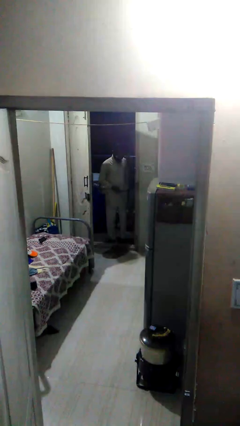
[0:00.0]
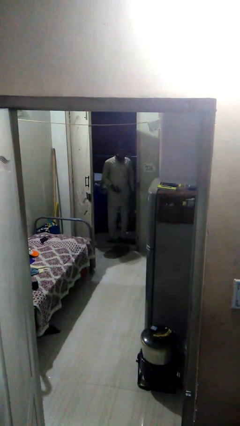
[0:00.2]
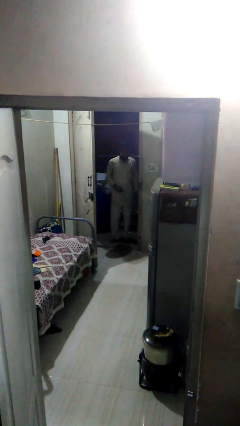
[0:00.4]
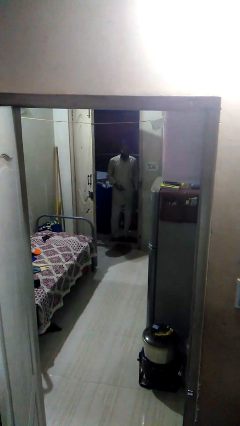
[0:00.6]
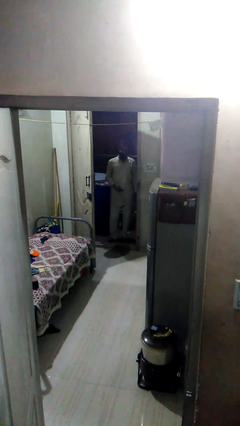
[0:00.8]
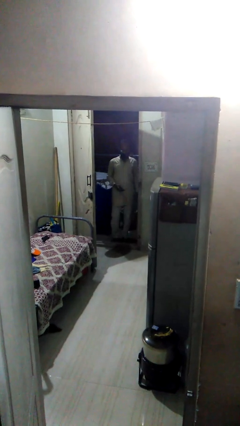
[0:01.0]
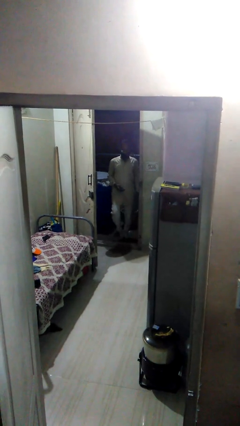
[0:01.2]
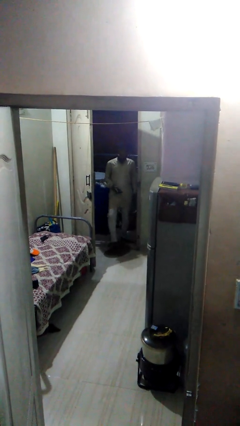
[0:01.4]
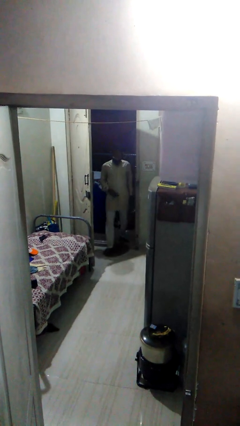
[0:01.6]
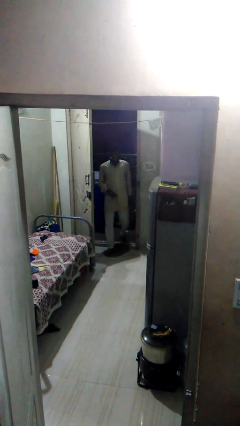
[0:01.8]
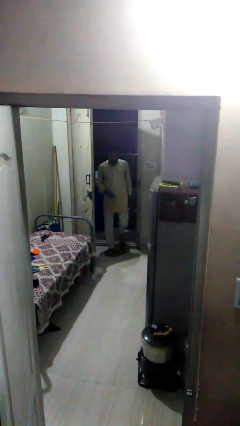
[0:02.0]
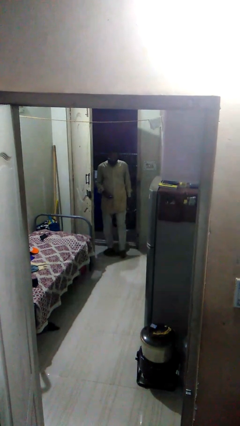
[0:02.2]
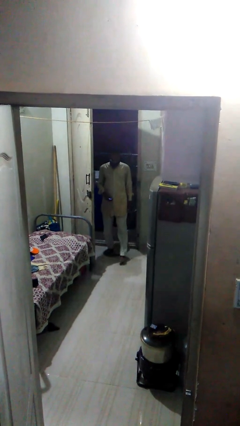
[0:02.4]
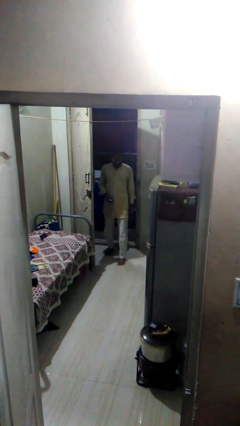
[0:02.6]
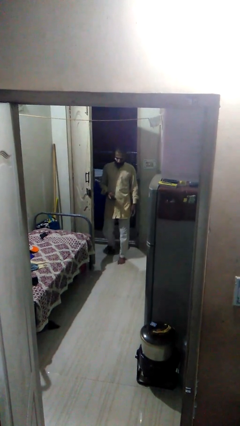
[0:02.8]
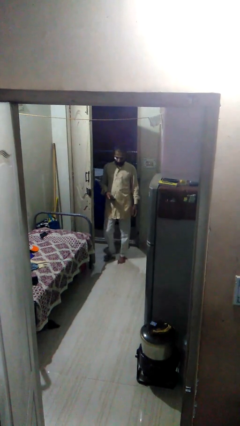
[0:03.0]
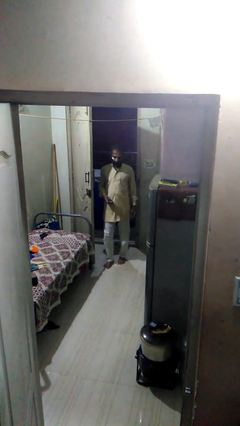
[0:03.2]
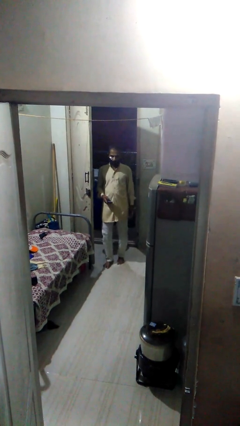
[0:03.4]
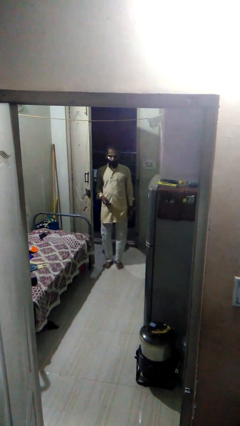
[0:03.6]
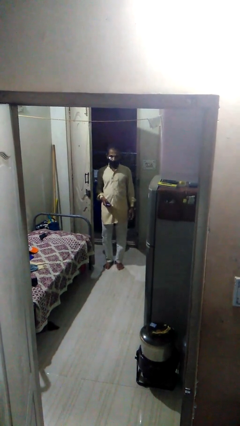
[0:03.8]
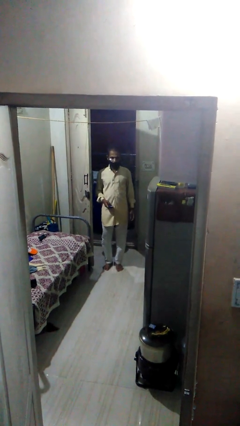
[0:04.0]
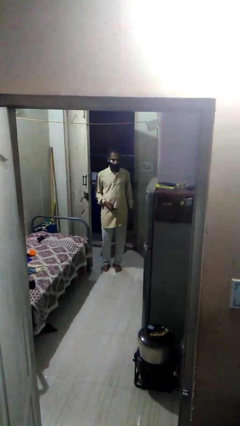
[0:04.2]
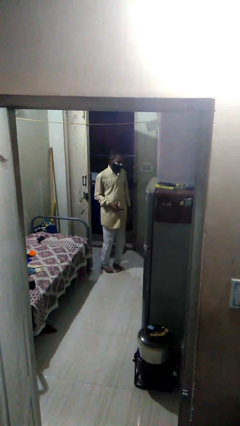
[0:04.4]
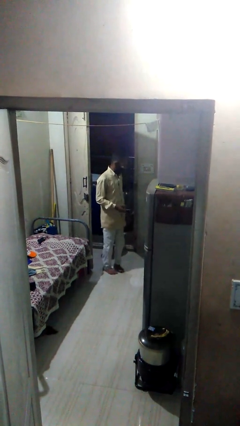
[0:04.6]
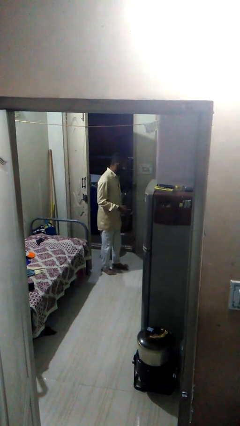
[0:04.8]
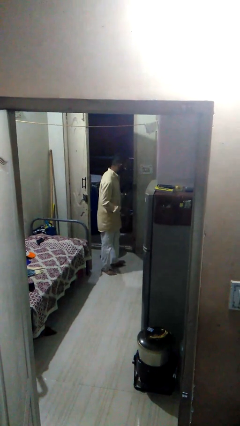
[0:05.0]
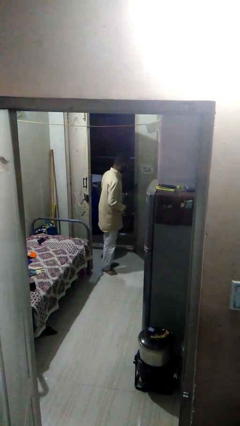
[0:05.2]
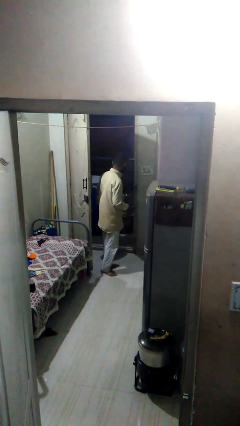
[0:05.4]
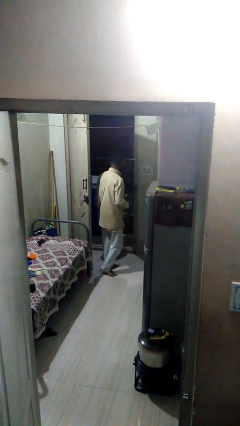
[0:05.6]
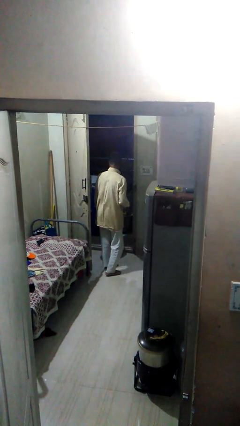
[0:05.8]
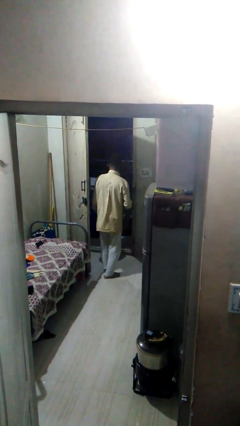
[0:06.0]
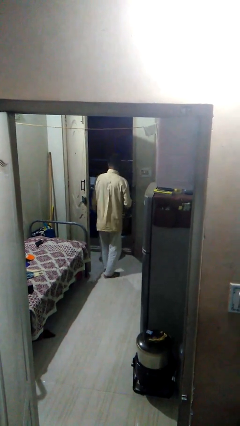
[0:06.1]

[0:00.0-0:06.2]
person enters scene through structure

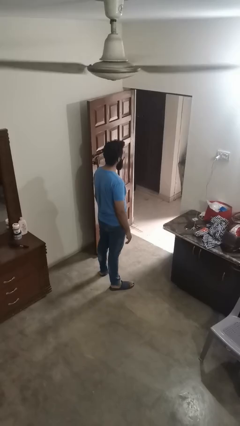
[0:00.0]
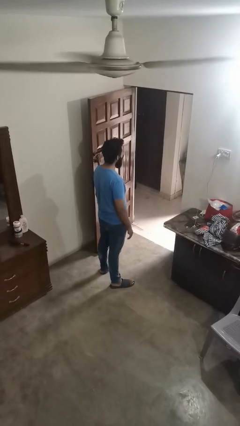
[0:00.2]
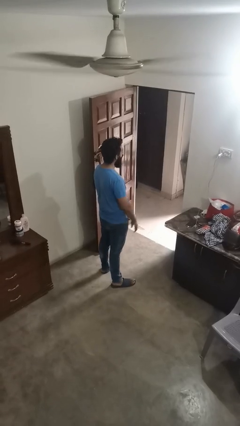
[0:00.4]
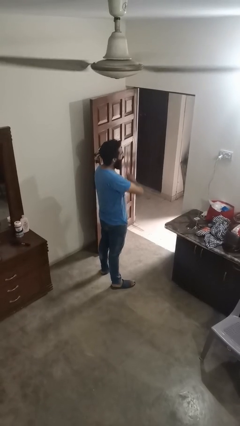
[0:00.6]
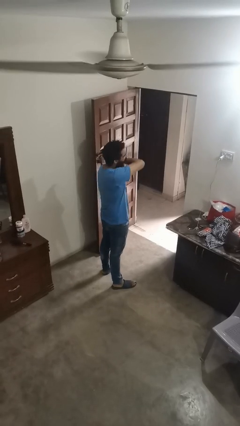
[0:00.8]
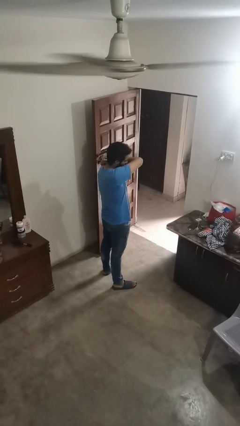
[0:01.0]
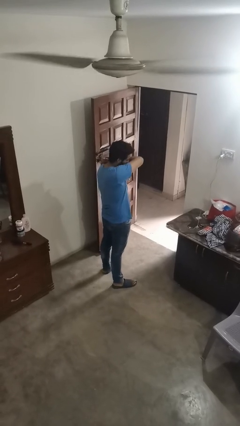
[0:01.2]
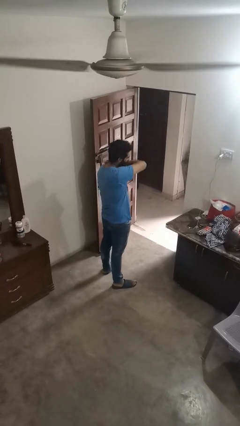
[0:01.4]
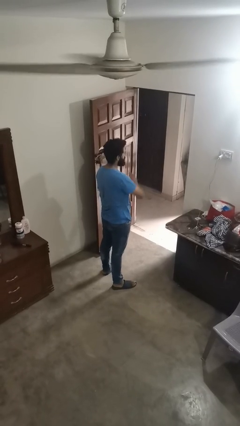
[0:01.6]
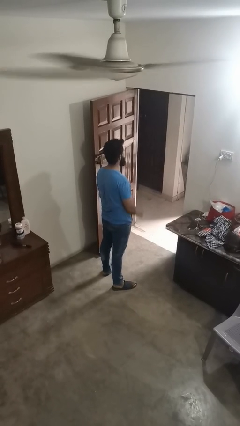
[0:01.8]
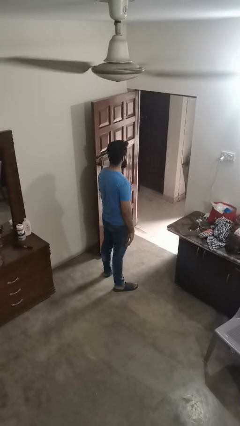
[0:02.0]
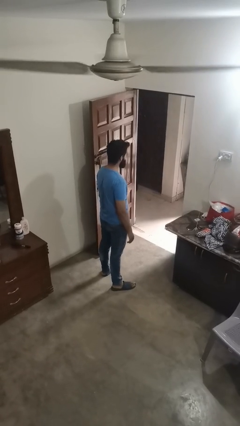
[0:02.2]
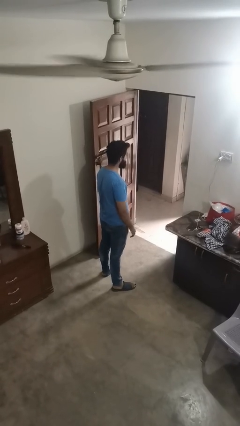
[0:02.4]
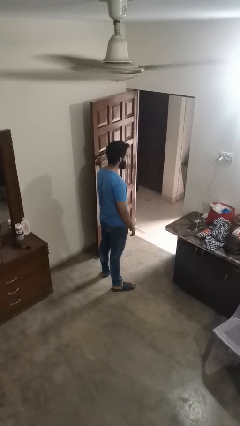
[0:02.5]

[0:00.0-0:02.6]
person sneezes into arm

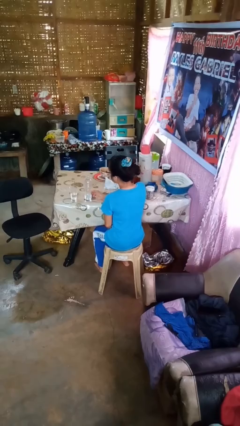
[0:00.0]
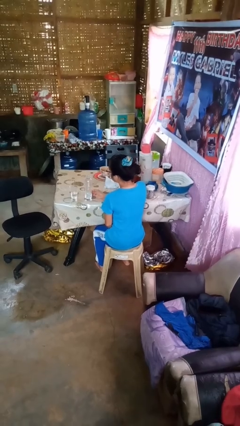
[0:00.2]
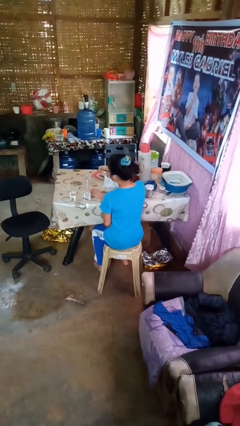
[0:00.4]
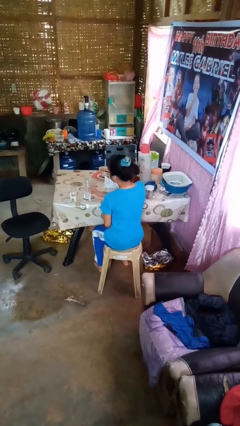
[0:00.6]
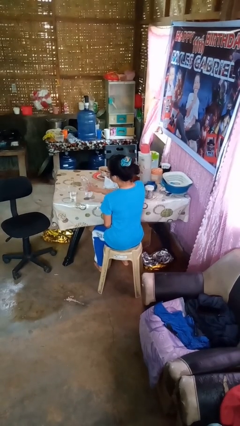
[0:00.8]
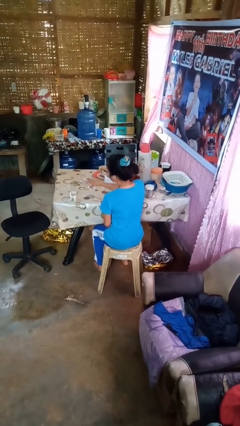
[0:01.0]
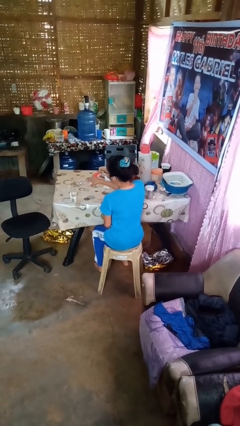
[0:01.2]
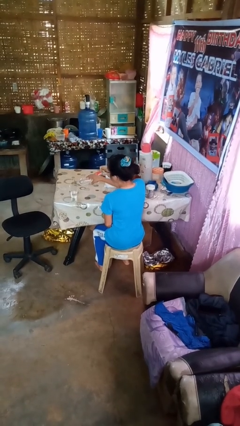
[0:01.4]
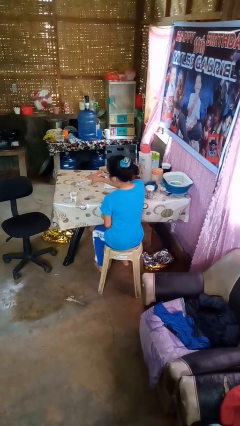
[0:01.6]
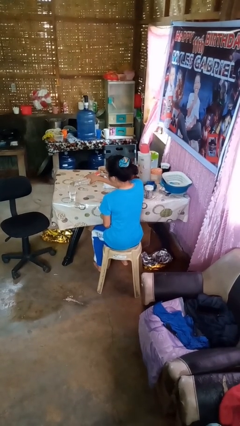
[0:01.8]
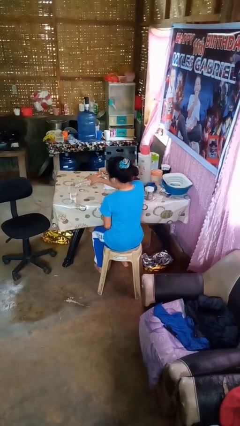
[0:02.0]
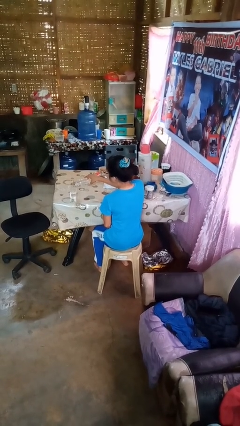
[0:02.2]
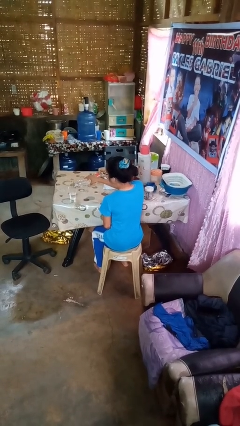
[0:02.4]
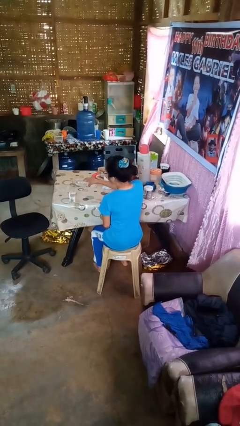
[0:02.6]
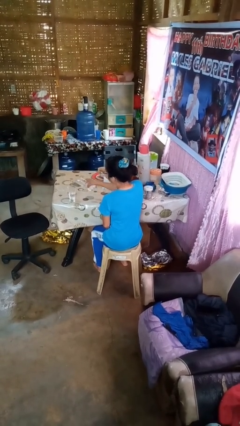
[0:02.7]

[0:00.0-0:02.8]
person pours liquid into cup

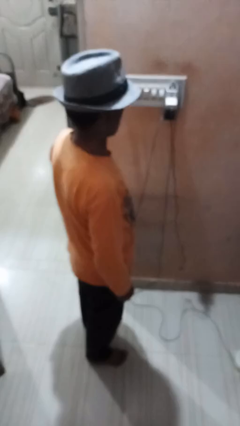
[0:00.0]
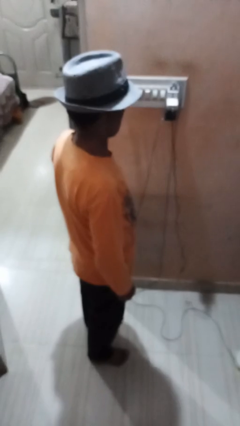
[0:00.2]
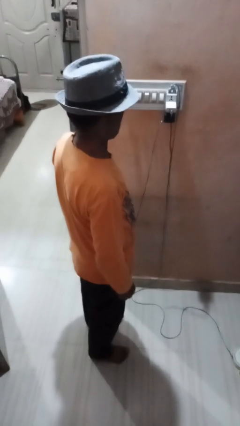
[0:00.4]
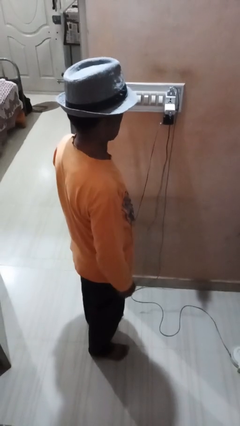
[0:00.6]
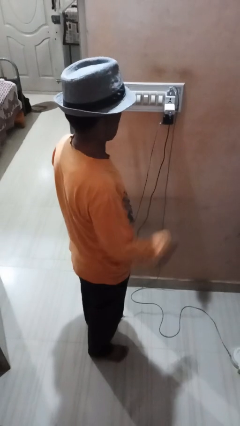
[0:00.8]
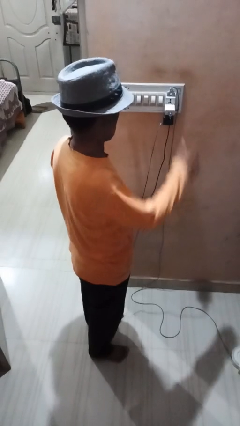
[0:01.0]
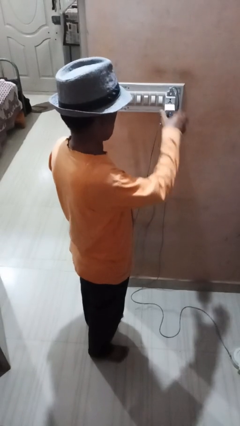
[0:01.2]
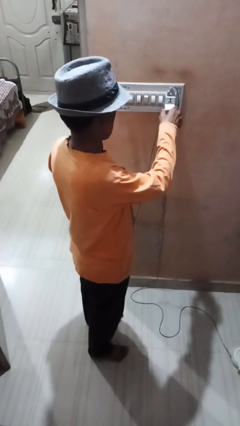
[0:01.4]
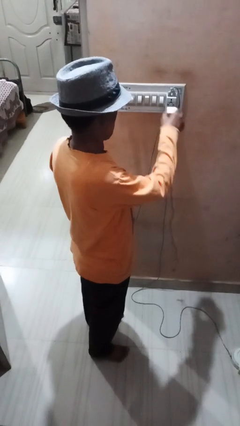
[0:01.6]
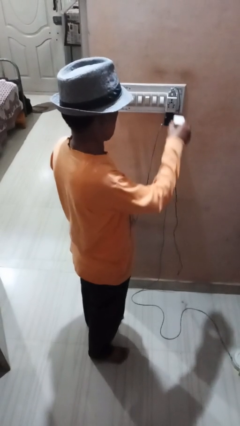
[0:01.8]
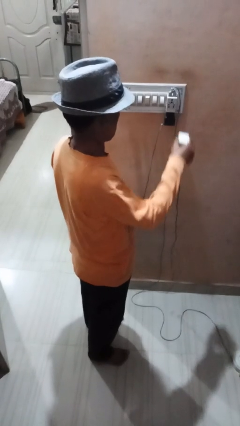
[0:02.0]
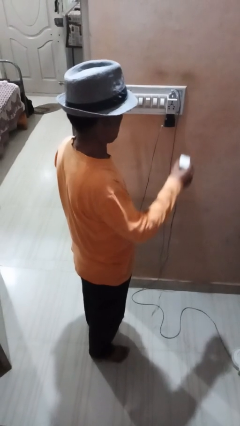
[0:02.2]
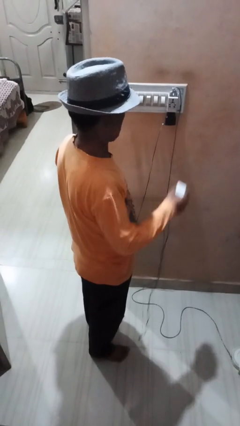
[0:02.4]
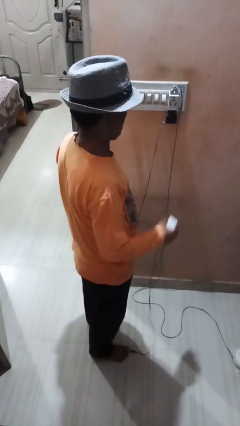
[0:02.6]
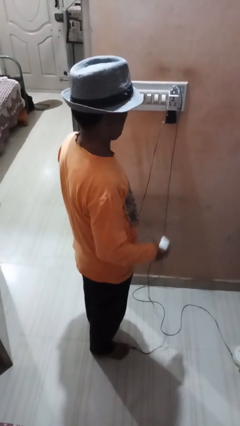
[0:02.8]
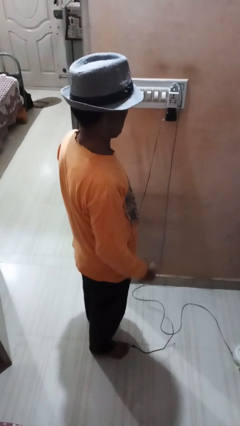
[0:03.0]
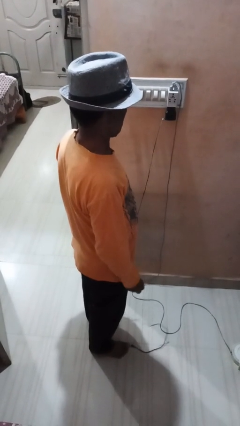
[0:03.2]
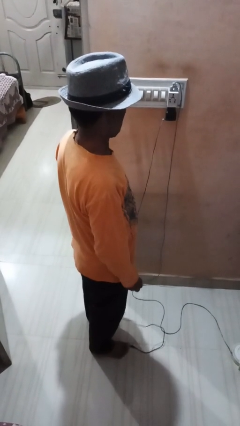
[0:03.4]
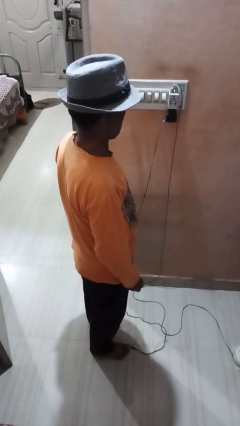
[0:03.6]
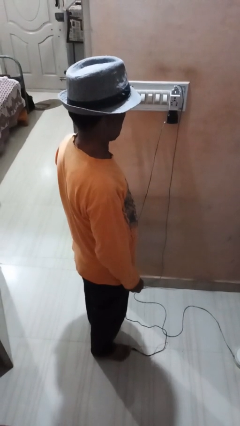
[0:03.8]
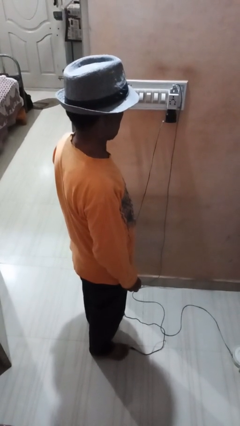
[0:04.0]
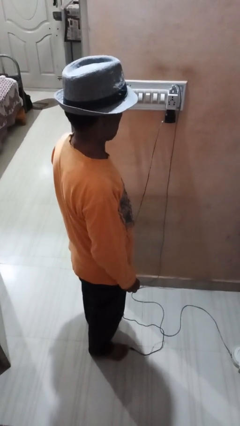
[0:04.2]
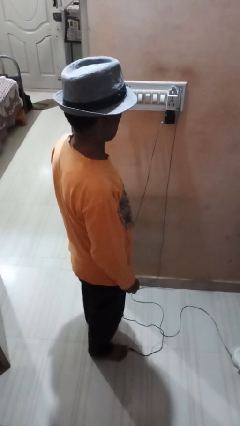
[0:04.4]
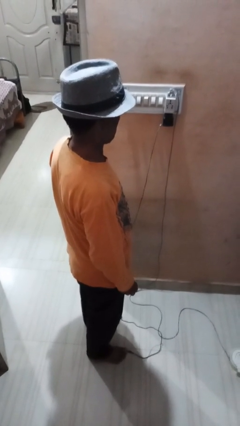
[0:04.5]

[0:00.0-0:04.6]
person unplugs from electrical socket

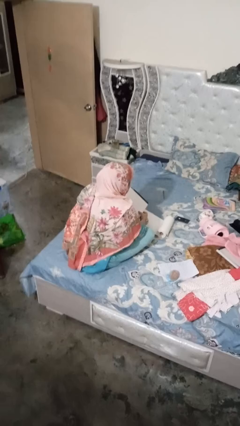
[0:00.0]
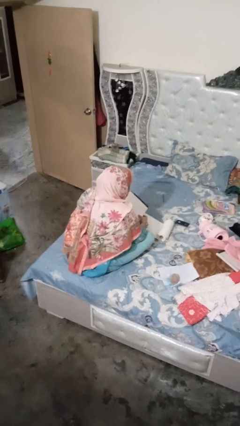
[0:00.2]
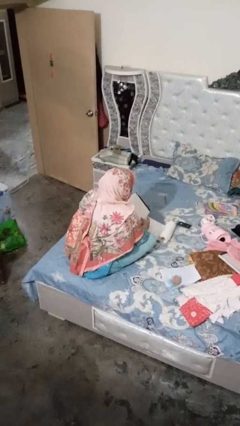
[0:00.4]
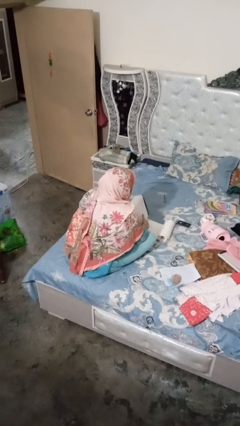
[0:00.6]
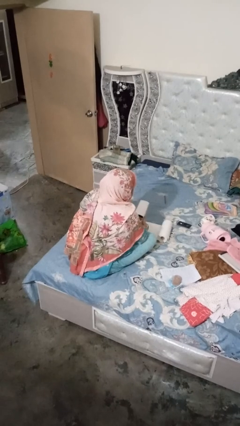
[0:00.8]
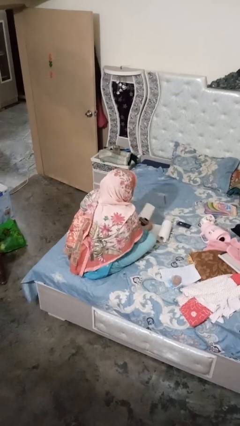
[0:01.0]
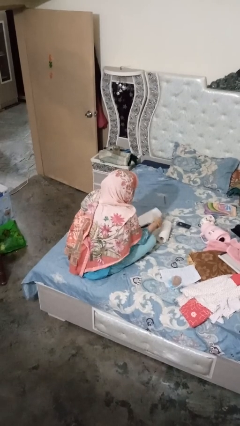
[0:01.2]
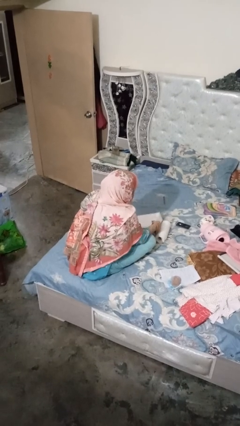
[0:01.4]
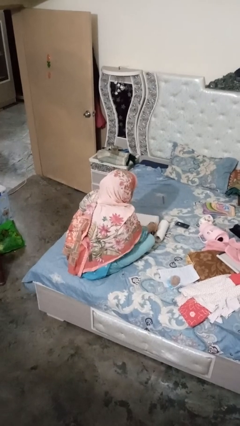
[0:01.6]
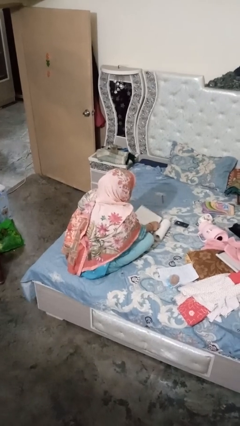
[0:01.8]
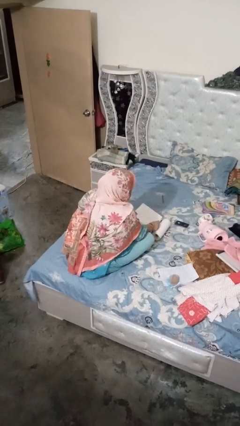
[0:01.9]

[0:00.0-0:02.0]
person wraps box
